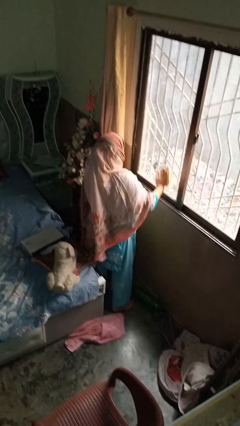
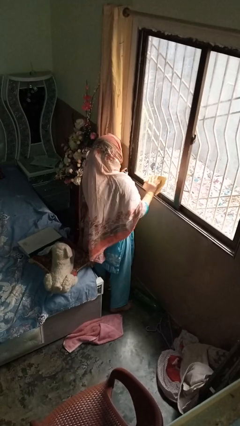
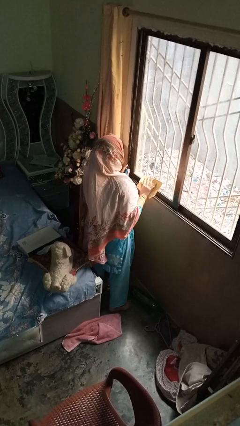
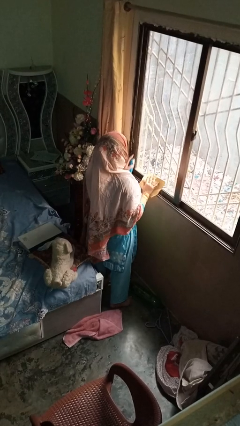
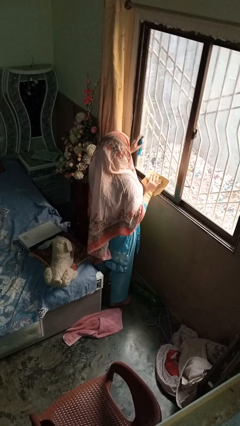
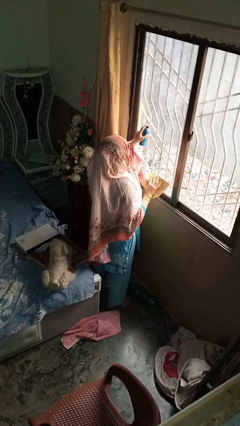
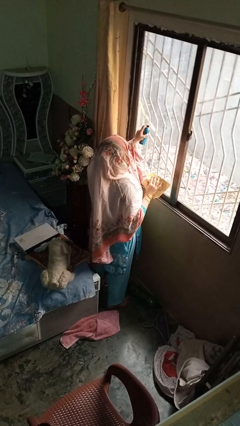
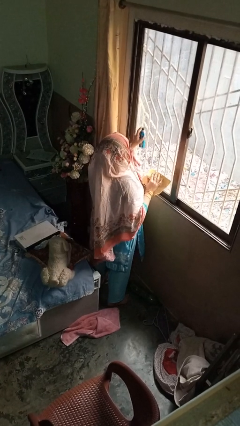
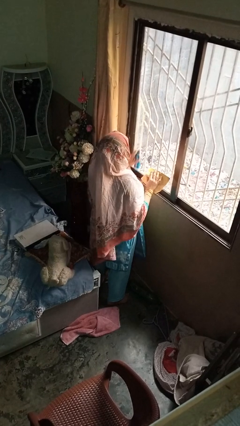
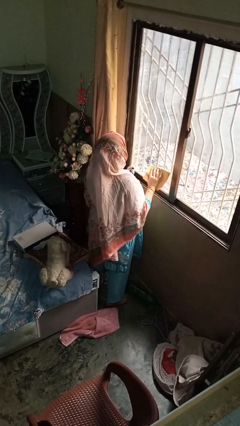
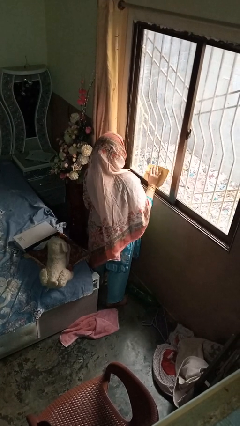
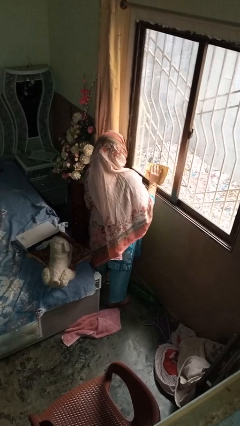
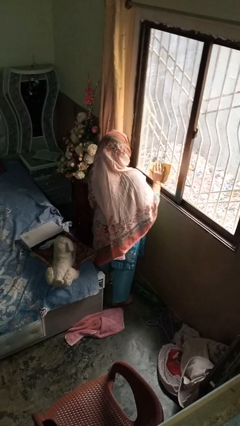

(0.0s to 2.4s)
person sprays from bottle

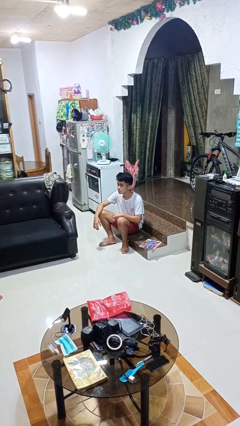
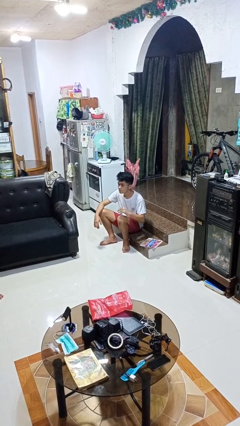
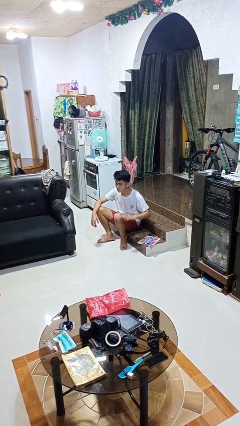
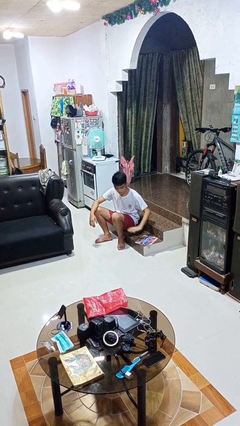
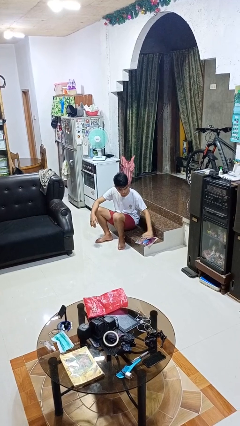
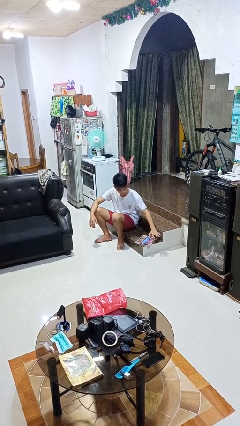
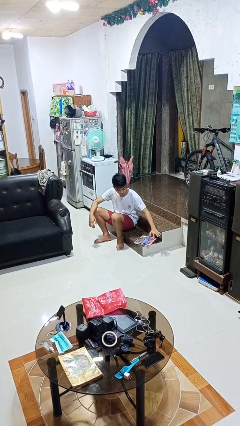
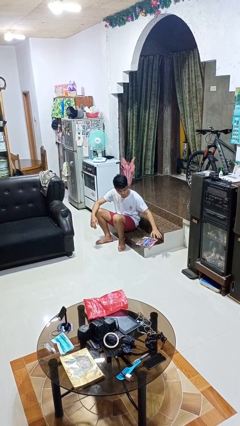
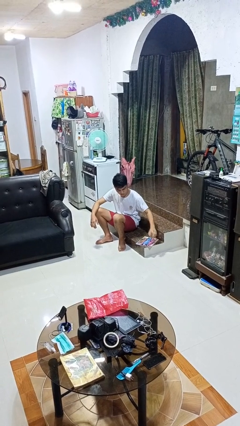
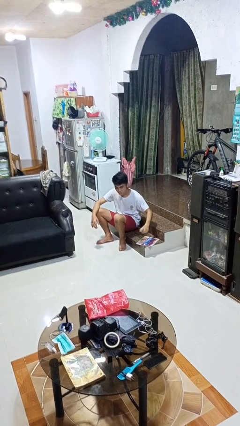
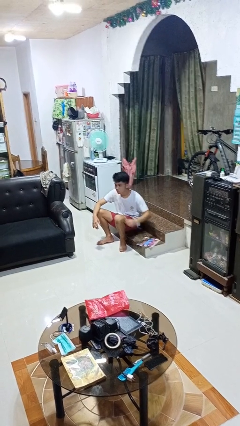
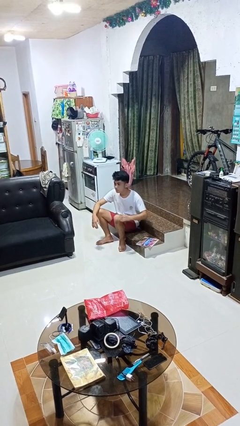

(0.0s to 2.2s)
person waves hand over object

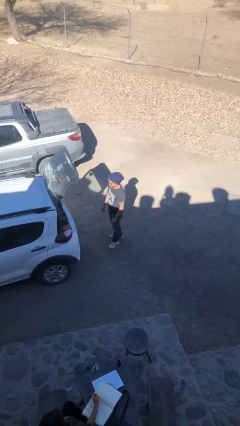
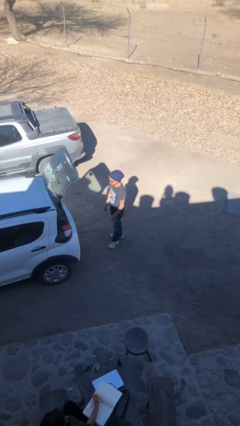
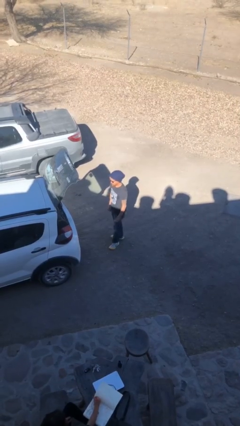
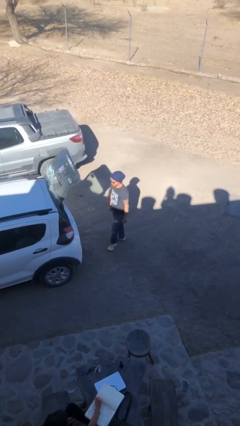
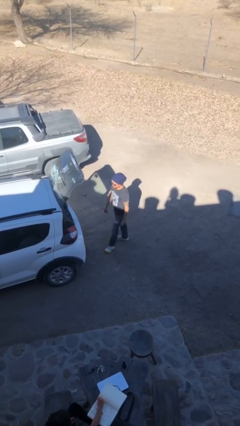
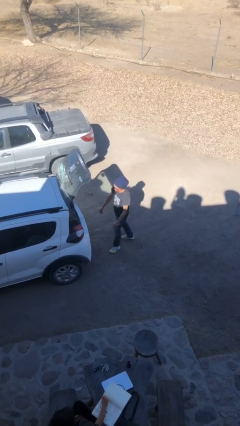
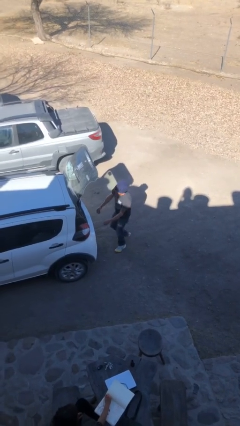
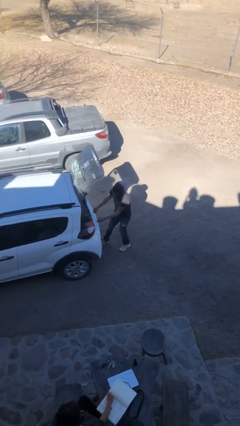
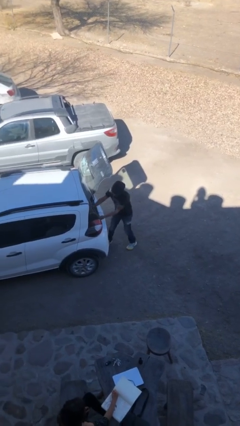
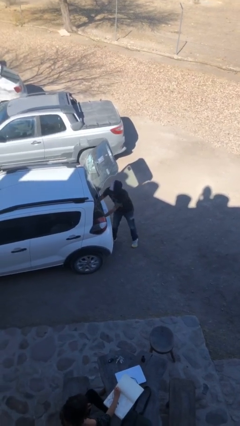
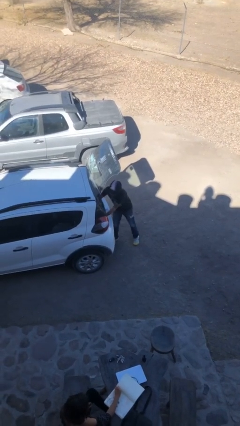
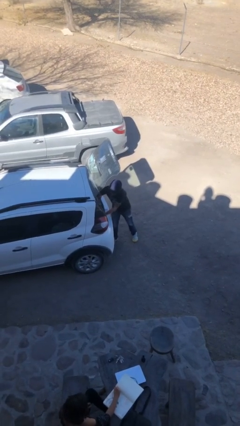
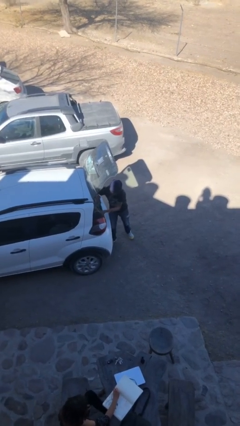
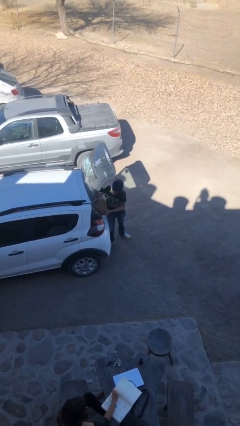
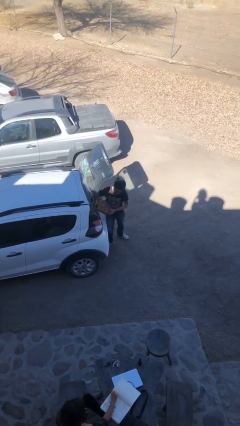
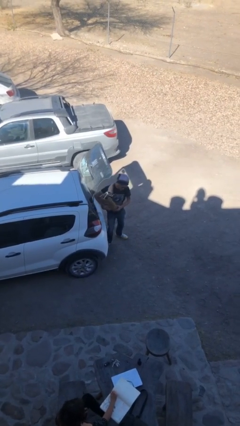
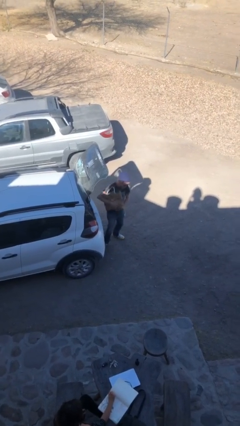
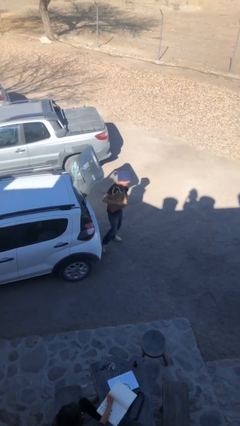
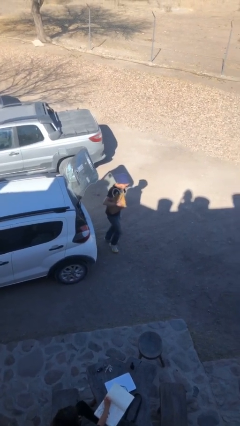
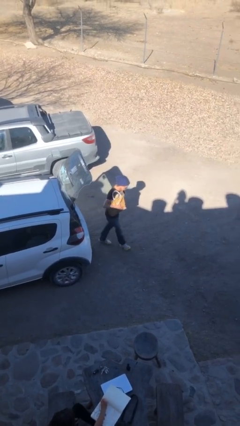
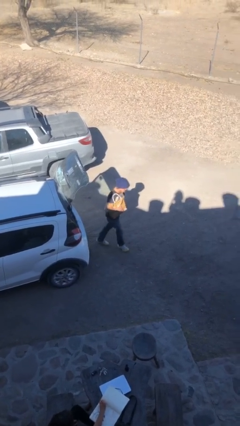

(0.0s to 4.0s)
person unloads car

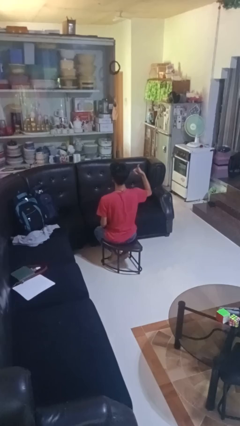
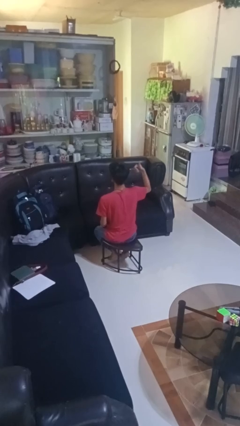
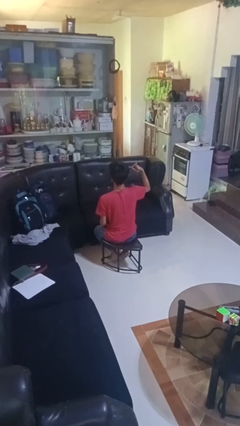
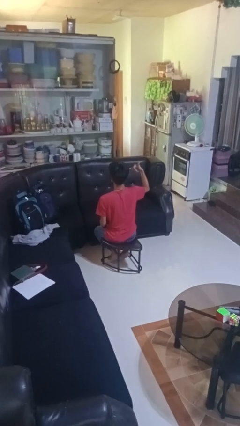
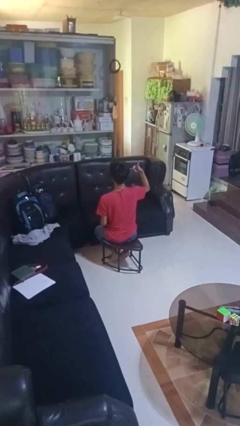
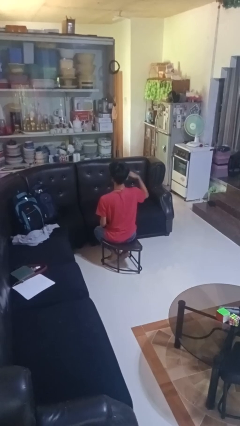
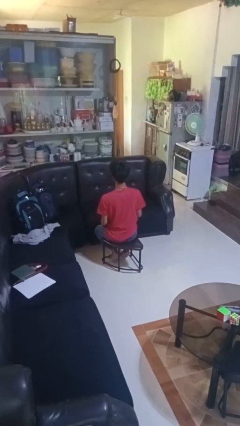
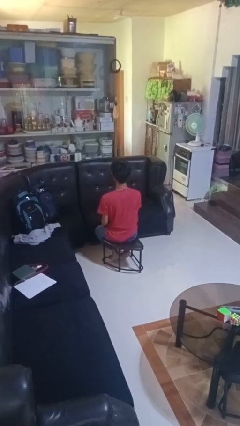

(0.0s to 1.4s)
person gestures hang loose

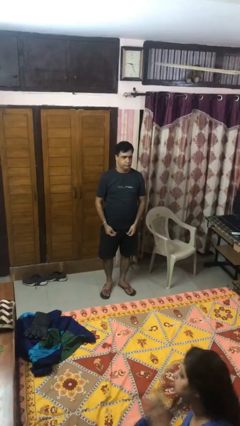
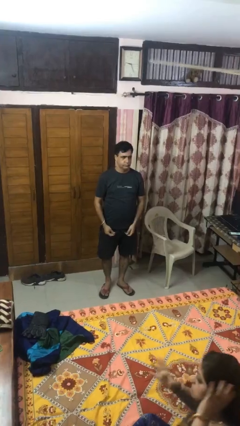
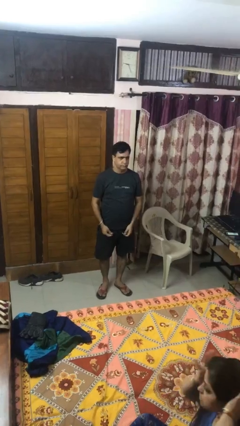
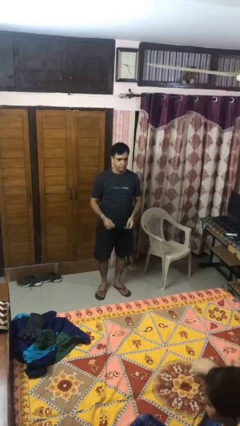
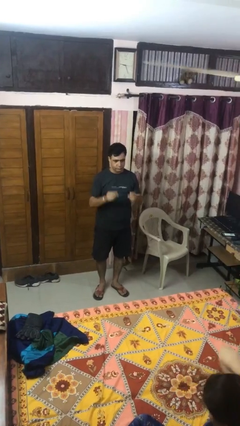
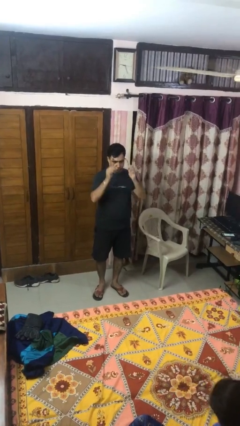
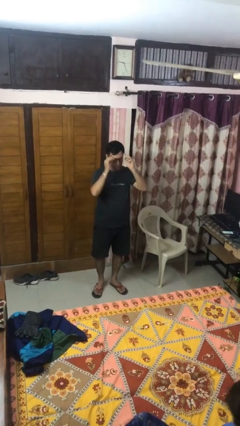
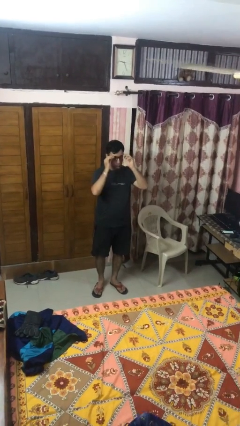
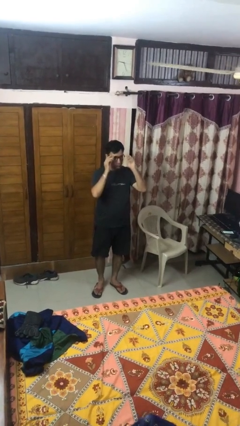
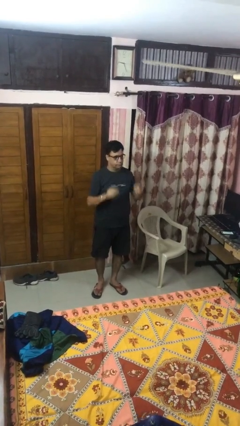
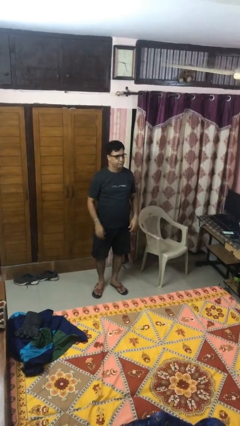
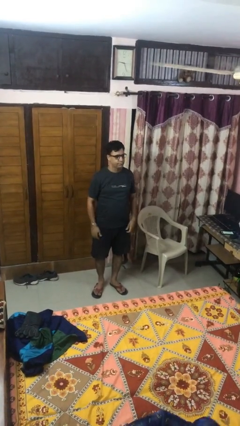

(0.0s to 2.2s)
person puts on glasses

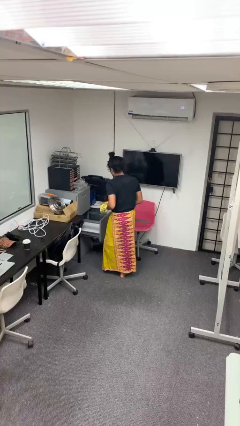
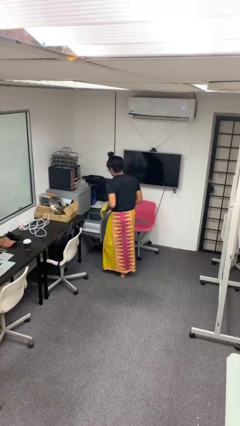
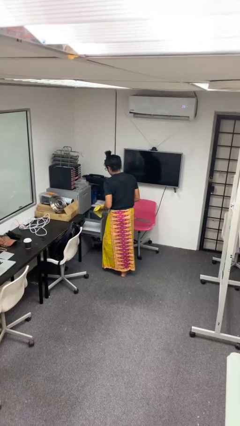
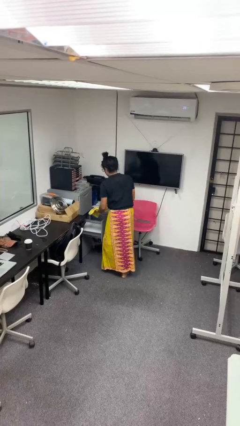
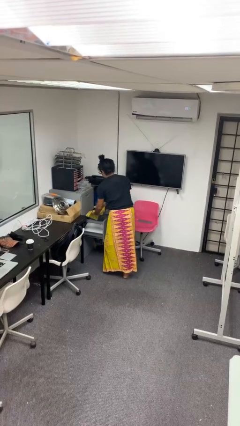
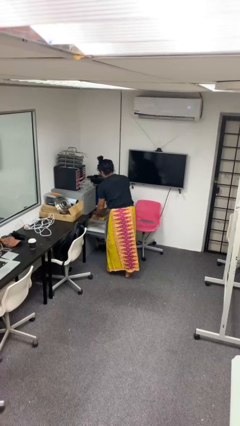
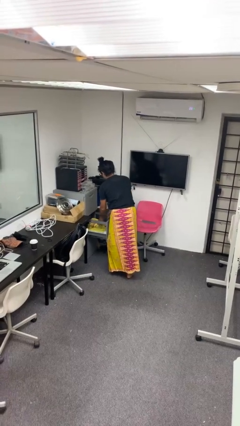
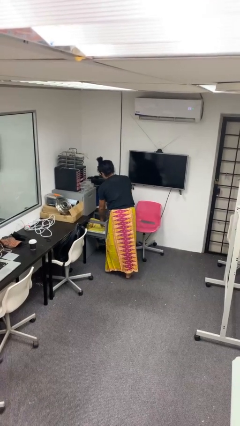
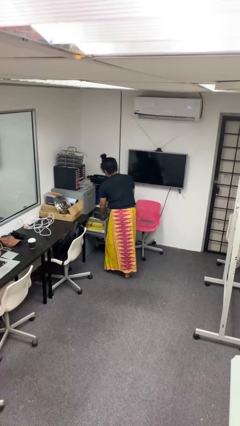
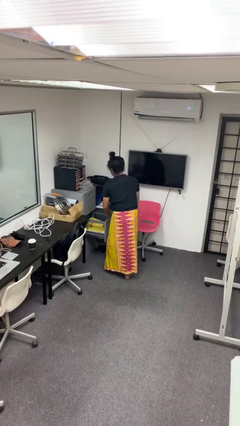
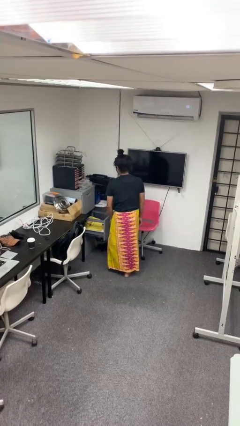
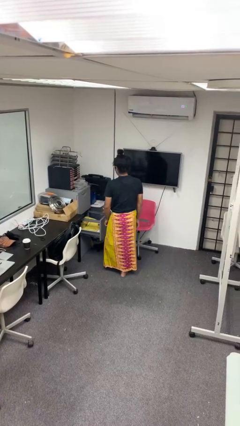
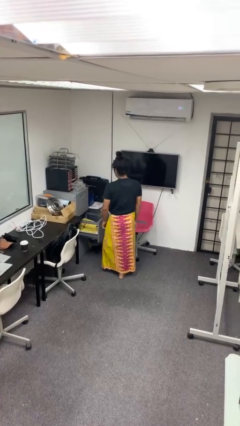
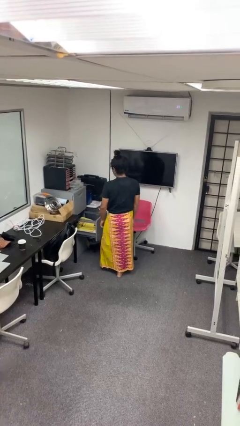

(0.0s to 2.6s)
person puts clothes into dresser

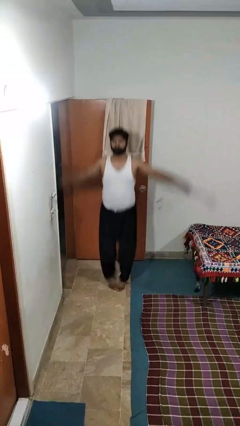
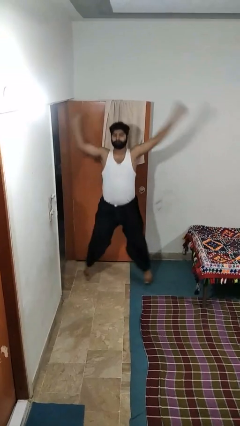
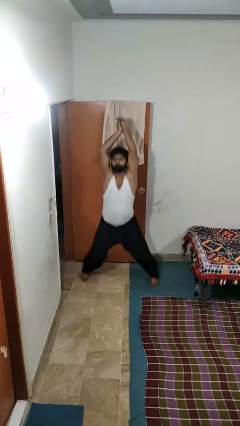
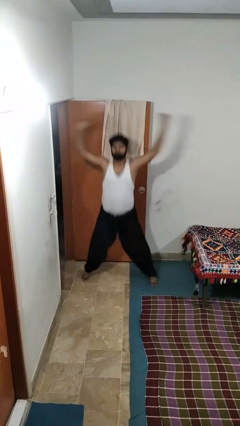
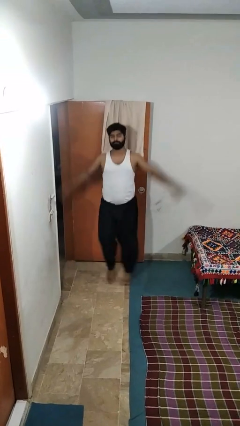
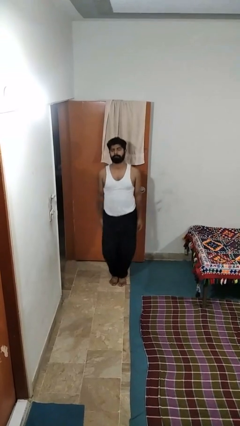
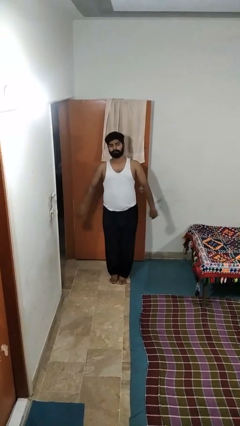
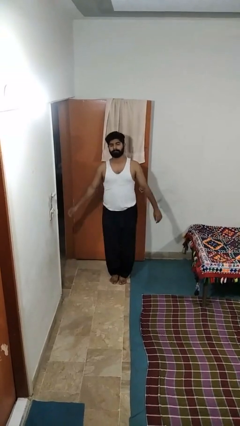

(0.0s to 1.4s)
person exercises with jumping jacks

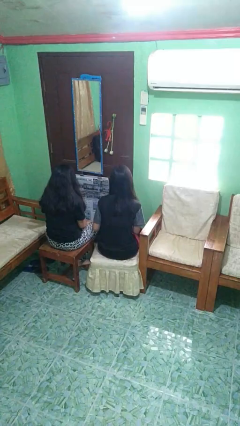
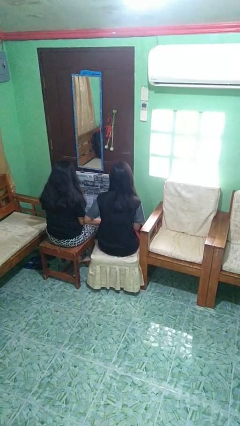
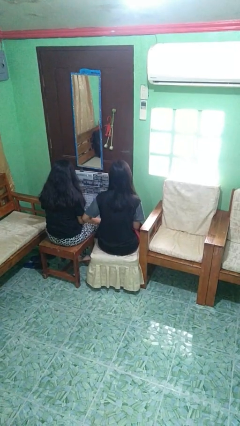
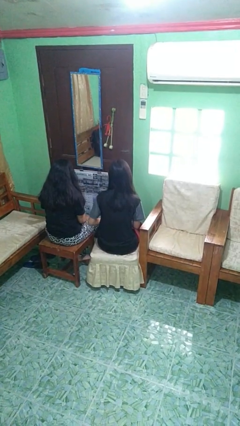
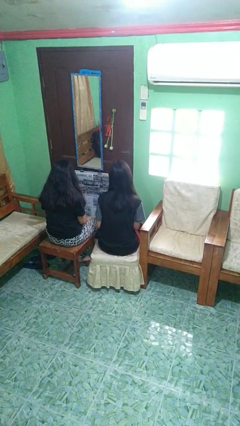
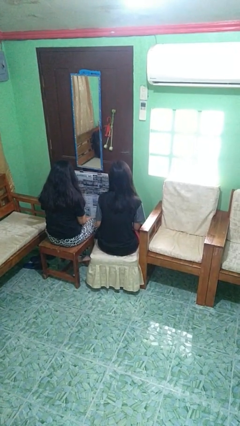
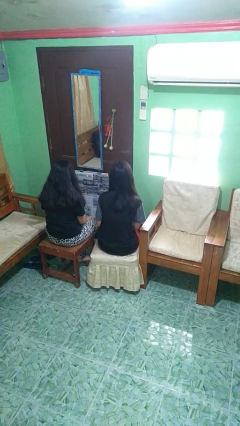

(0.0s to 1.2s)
person nudges person with elbow
